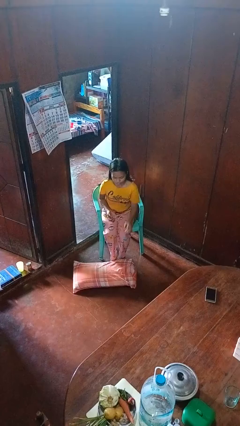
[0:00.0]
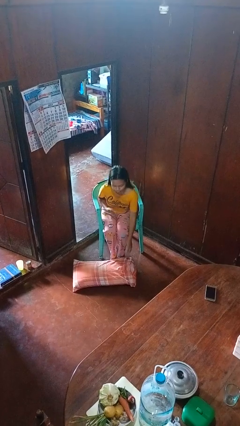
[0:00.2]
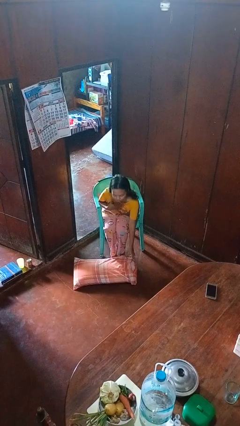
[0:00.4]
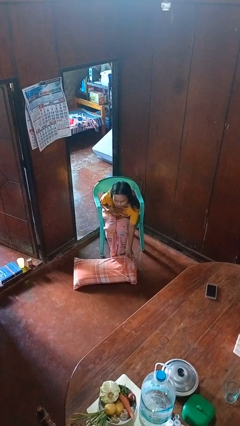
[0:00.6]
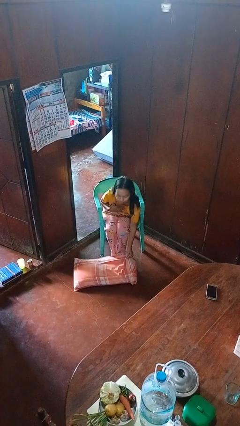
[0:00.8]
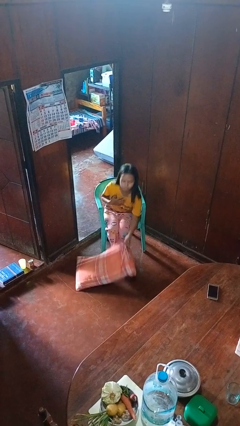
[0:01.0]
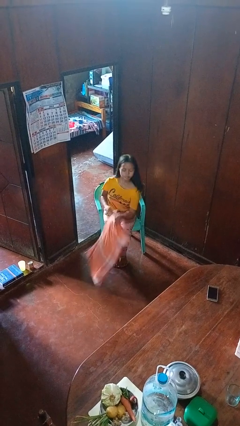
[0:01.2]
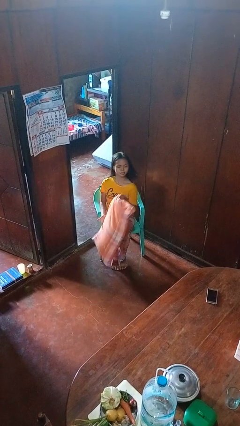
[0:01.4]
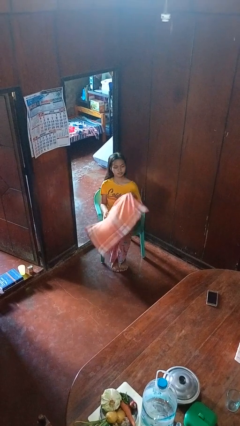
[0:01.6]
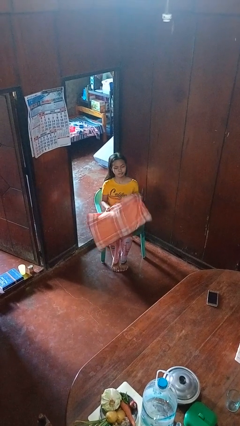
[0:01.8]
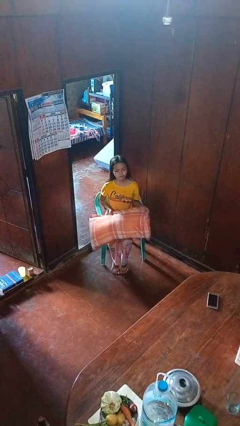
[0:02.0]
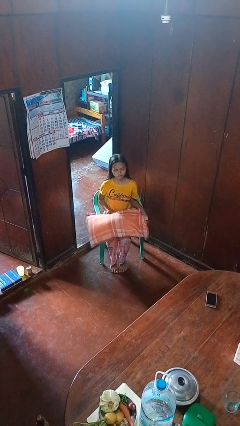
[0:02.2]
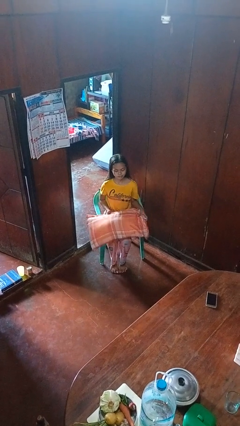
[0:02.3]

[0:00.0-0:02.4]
person picks up object from floor

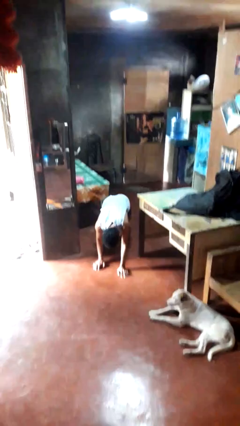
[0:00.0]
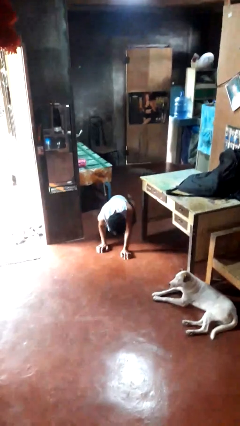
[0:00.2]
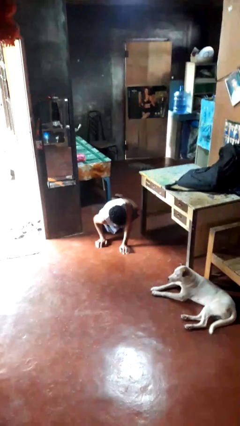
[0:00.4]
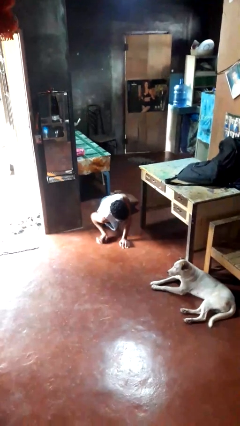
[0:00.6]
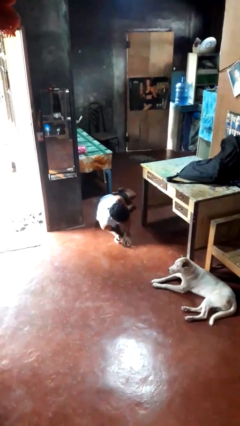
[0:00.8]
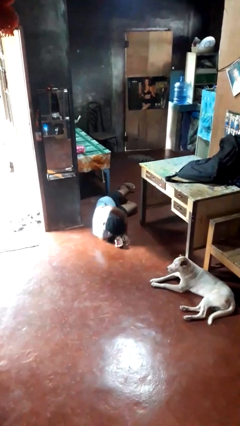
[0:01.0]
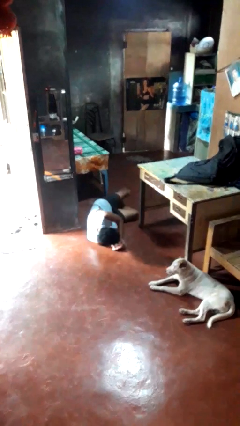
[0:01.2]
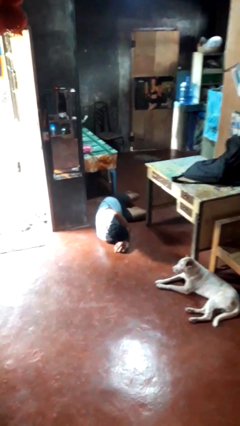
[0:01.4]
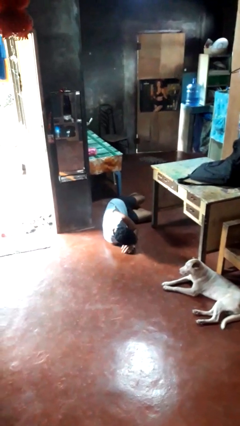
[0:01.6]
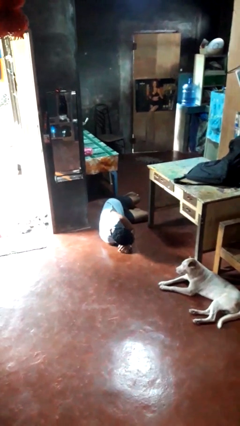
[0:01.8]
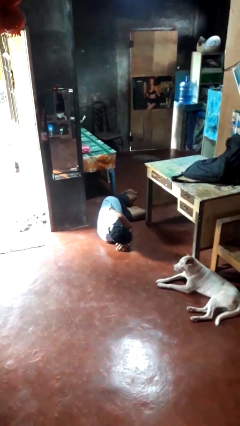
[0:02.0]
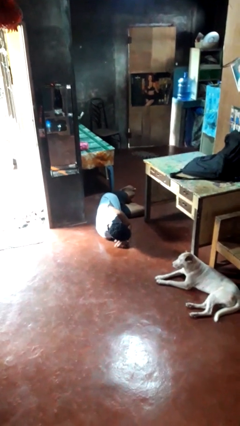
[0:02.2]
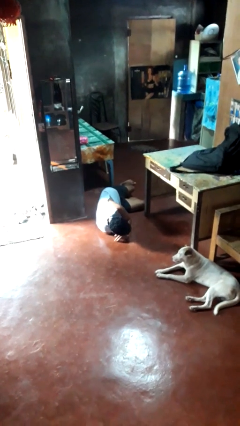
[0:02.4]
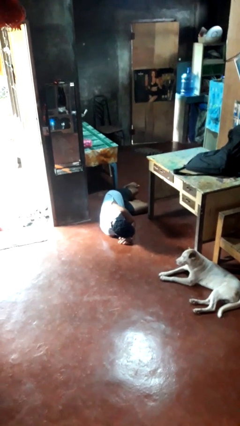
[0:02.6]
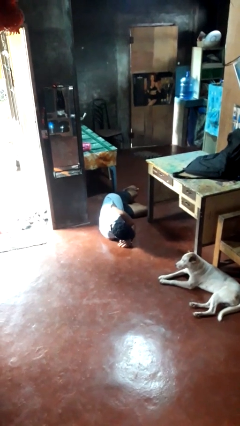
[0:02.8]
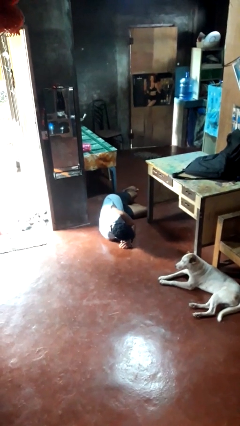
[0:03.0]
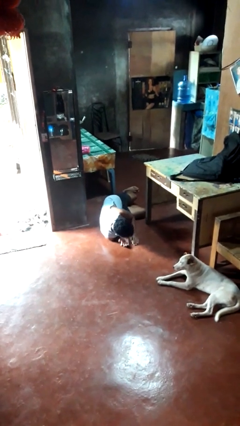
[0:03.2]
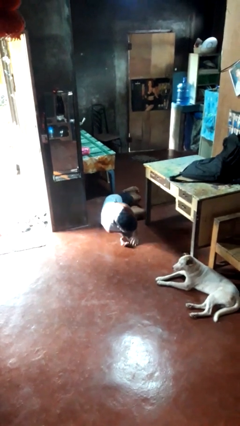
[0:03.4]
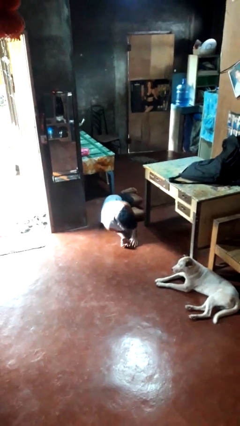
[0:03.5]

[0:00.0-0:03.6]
person lies down on floor

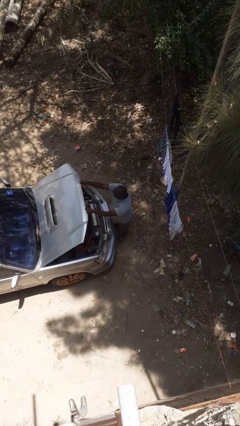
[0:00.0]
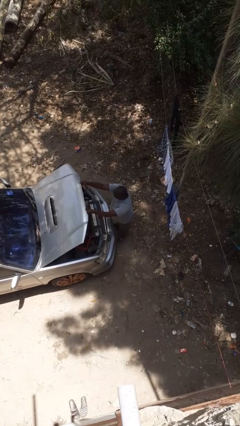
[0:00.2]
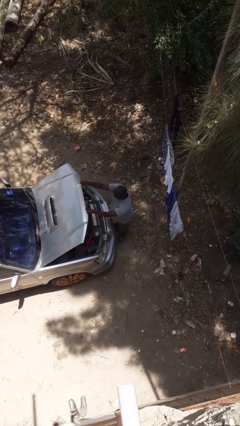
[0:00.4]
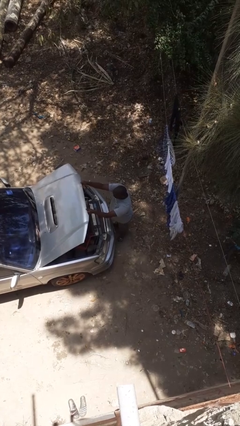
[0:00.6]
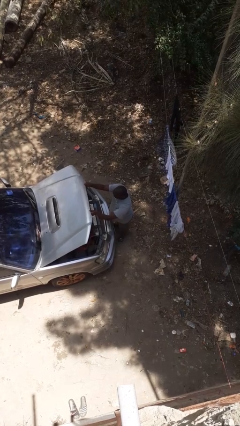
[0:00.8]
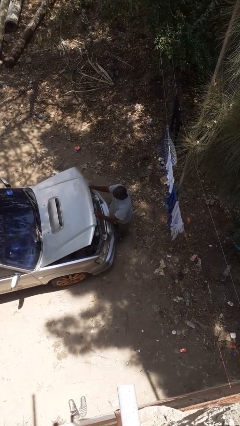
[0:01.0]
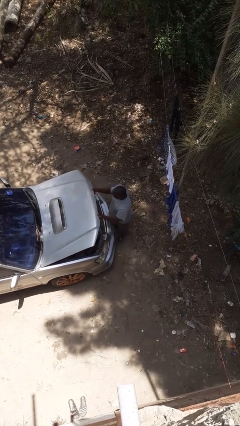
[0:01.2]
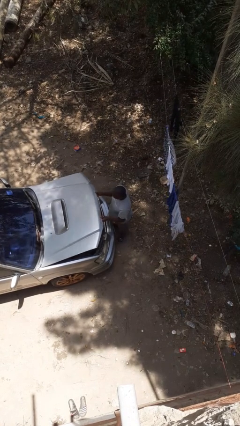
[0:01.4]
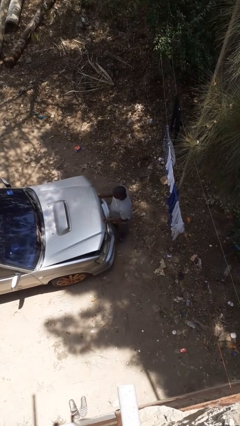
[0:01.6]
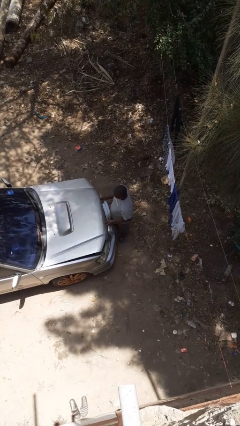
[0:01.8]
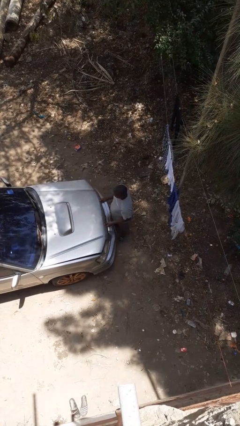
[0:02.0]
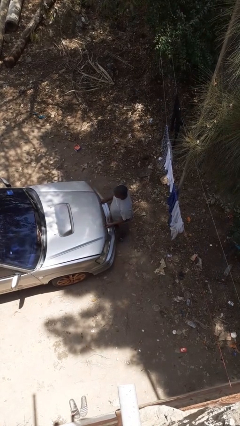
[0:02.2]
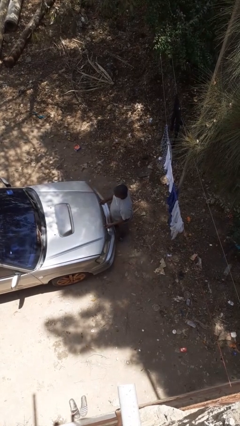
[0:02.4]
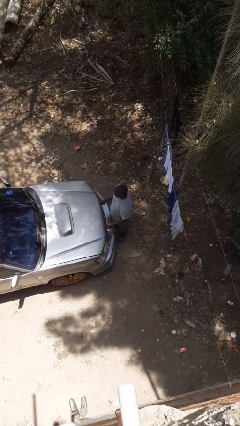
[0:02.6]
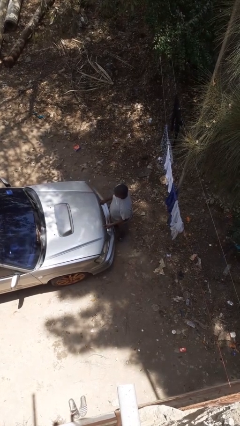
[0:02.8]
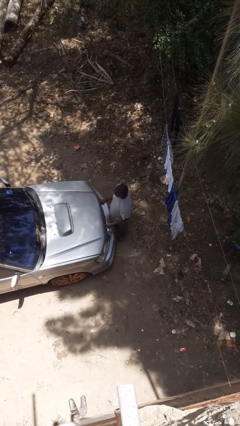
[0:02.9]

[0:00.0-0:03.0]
person closes car hood

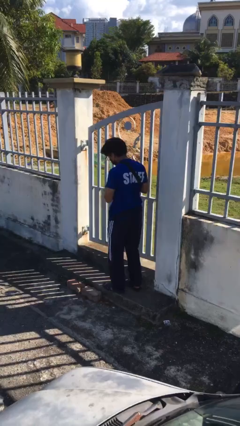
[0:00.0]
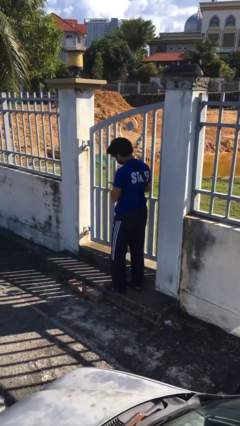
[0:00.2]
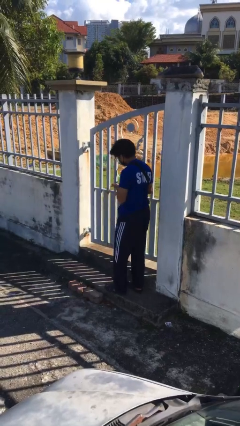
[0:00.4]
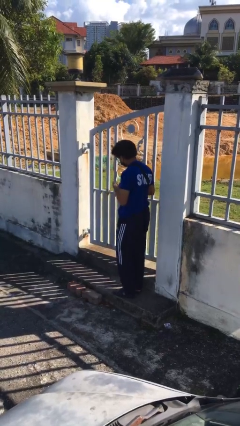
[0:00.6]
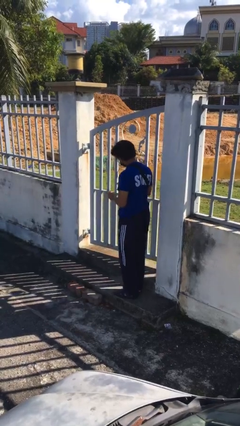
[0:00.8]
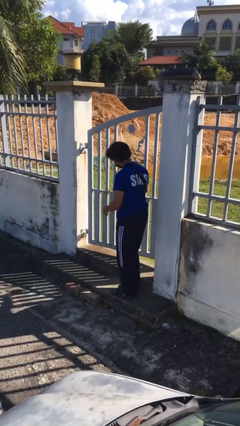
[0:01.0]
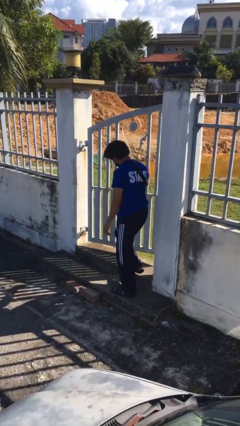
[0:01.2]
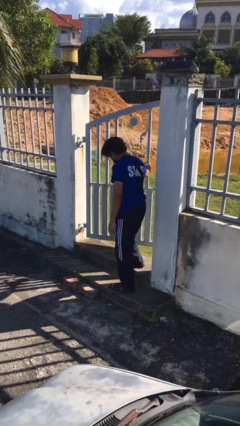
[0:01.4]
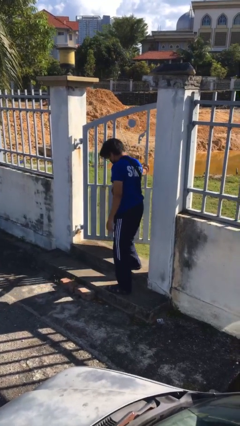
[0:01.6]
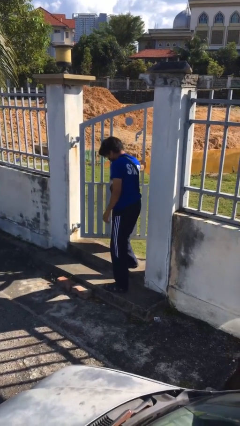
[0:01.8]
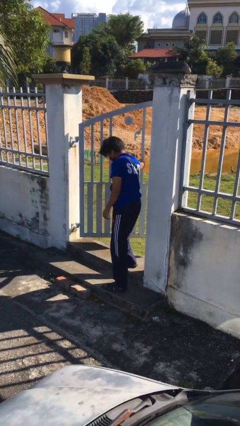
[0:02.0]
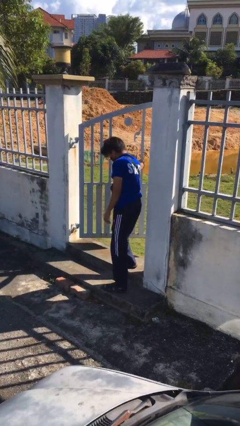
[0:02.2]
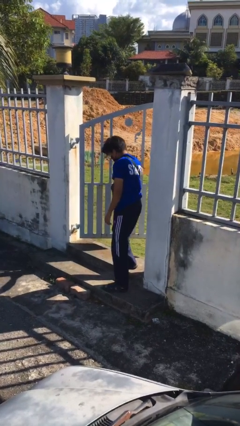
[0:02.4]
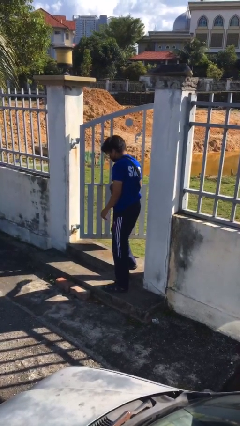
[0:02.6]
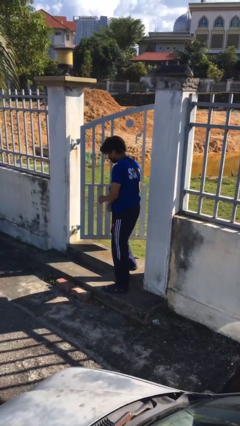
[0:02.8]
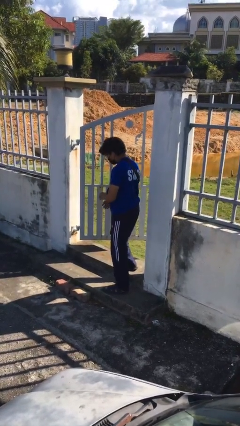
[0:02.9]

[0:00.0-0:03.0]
person opens facility door

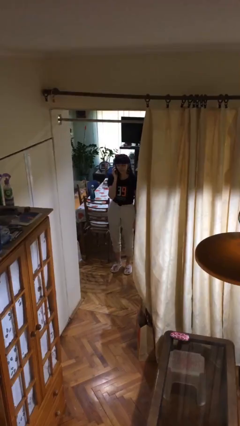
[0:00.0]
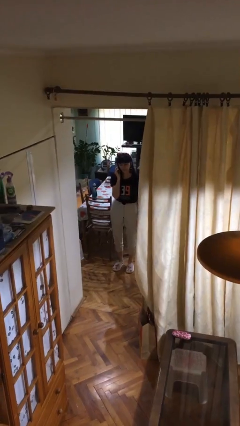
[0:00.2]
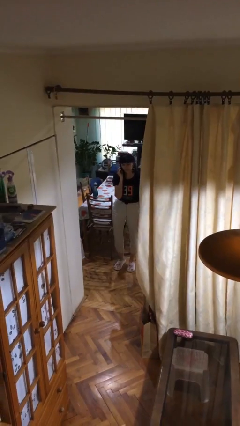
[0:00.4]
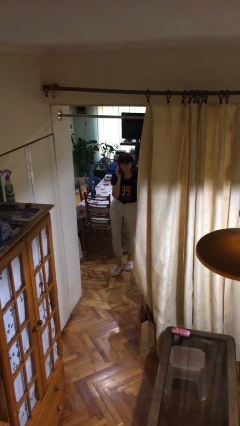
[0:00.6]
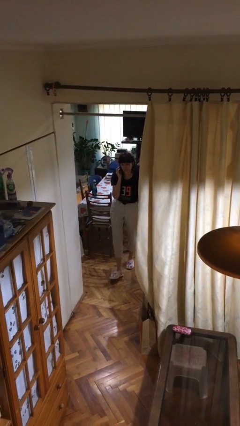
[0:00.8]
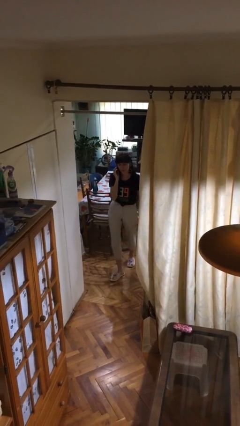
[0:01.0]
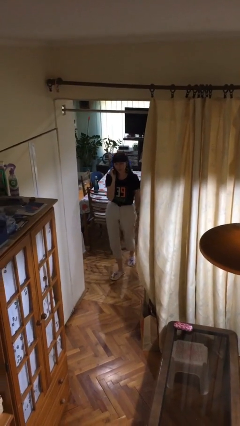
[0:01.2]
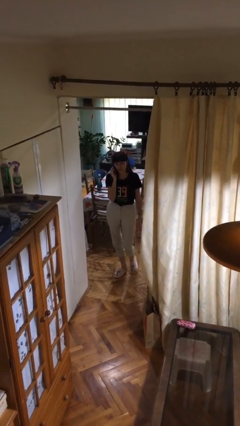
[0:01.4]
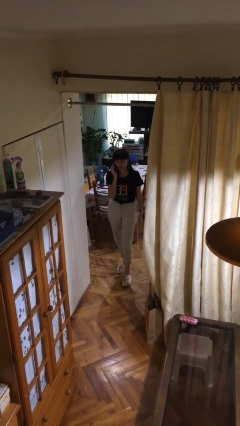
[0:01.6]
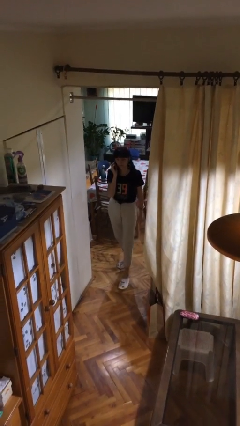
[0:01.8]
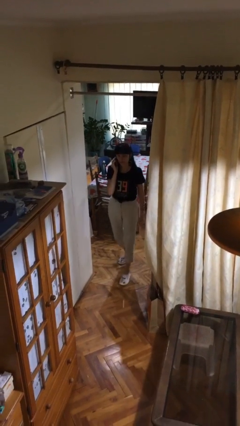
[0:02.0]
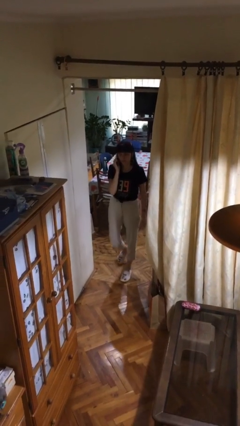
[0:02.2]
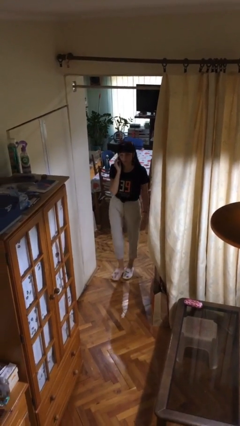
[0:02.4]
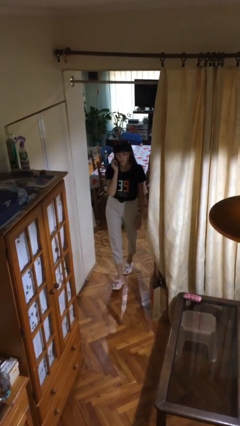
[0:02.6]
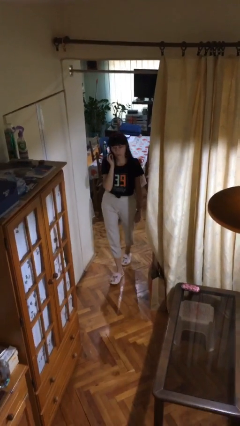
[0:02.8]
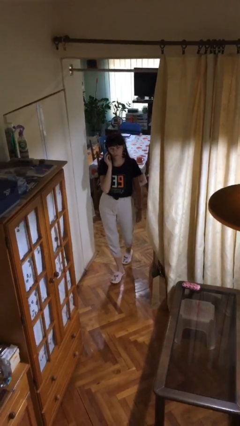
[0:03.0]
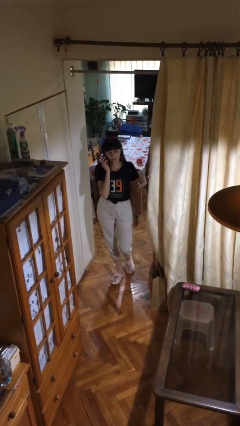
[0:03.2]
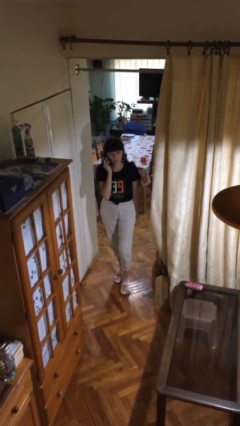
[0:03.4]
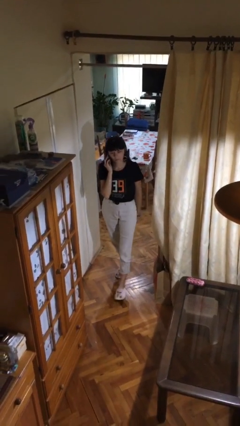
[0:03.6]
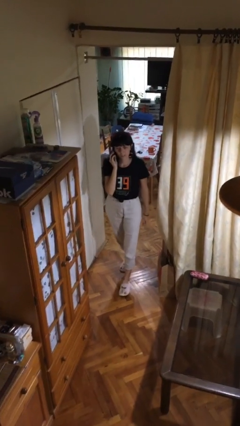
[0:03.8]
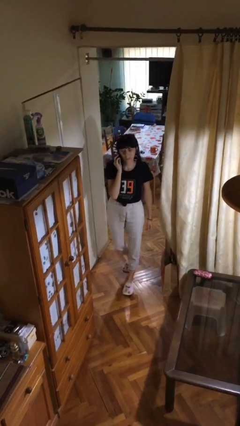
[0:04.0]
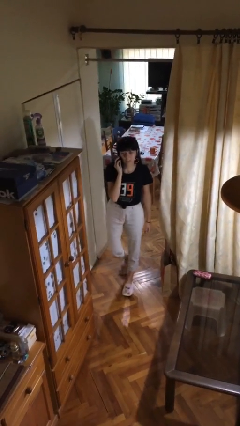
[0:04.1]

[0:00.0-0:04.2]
person enters scene through structure

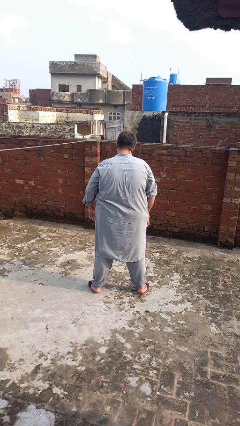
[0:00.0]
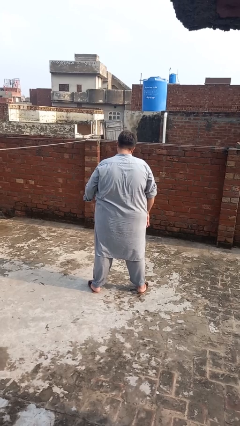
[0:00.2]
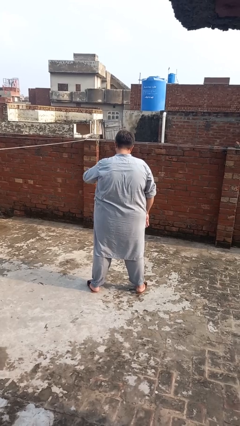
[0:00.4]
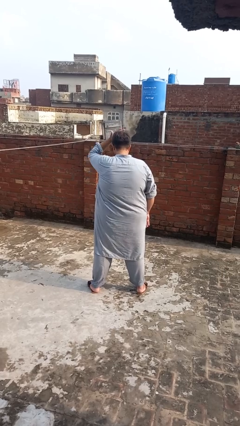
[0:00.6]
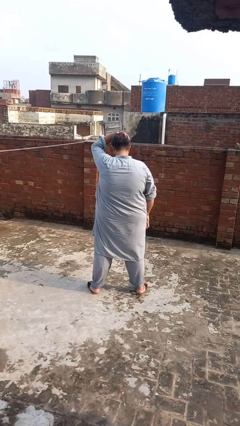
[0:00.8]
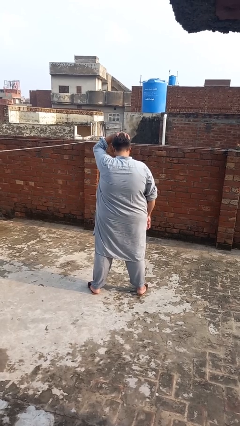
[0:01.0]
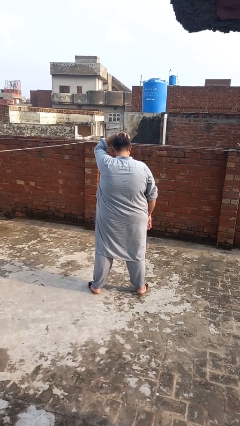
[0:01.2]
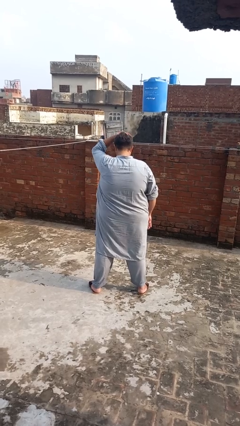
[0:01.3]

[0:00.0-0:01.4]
person pats head
